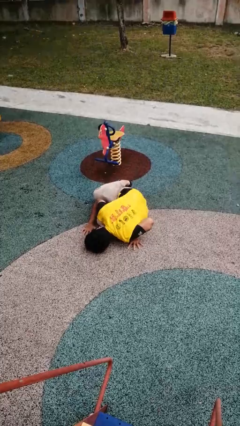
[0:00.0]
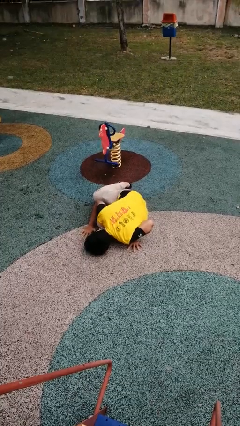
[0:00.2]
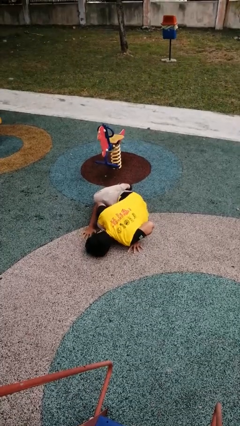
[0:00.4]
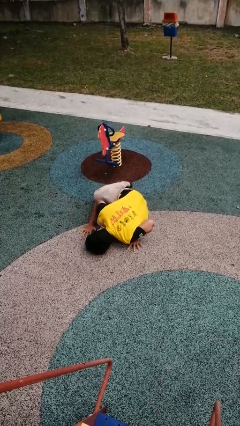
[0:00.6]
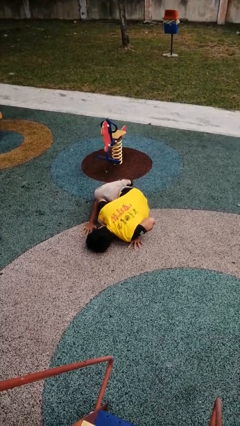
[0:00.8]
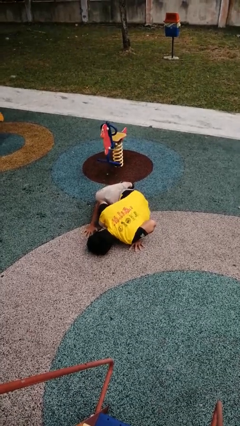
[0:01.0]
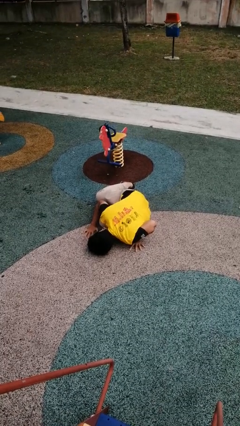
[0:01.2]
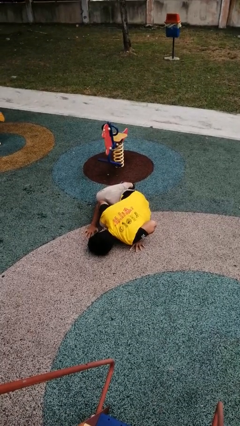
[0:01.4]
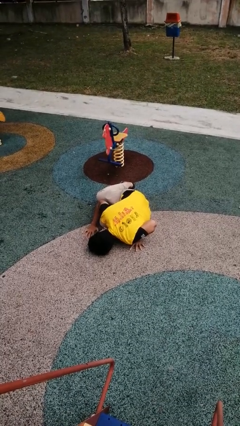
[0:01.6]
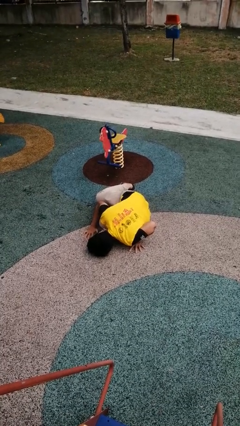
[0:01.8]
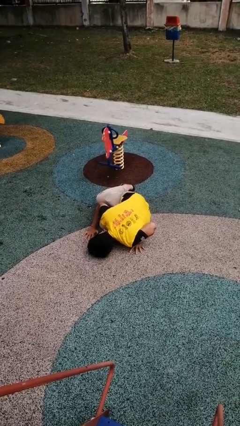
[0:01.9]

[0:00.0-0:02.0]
person lies down on floor

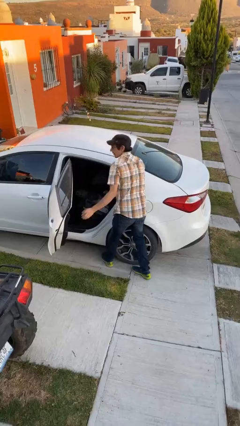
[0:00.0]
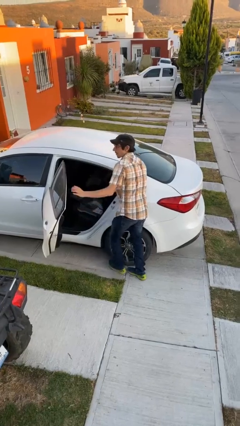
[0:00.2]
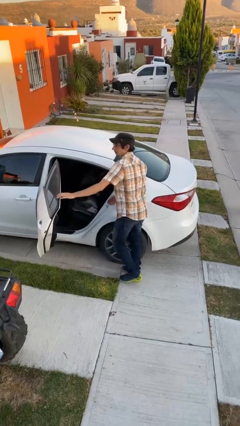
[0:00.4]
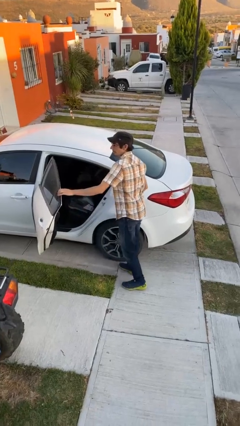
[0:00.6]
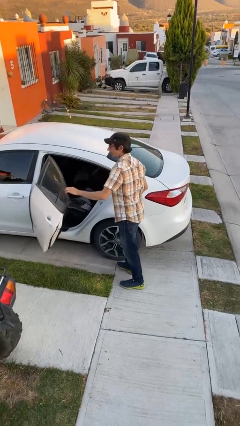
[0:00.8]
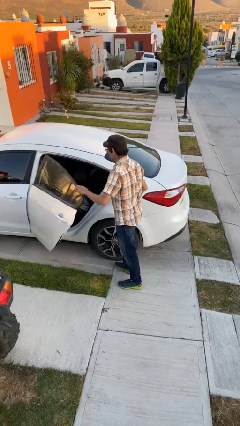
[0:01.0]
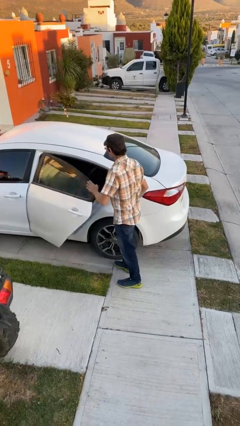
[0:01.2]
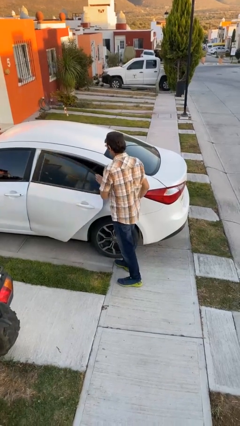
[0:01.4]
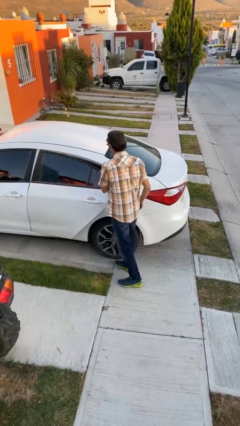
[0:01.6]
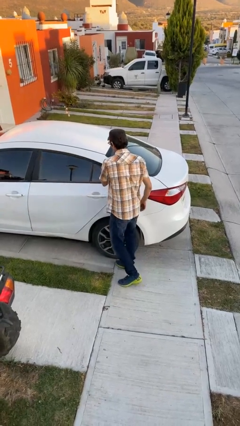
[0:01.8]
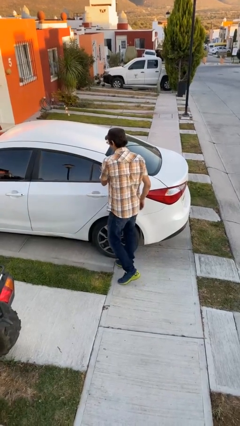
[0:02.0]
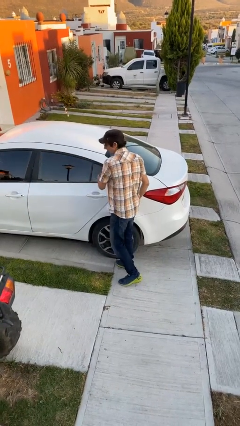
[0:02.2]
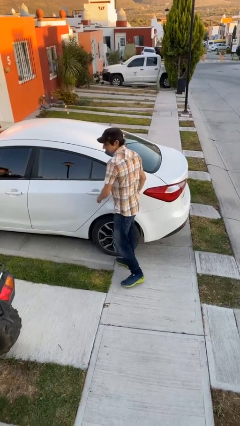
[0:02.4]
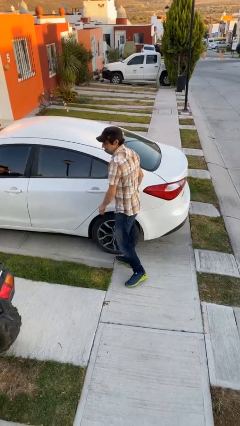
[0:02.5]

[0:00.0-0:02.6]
person closes car door

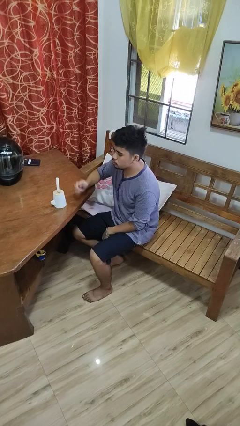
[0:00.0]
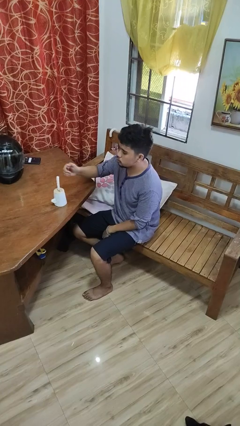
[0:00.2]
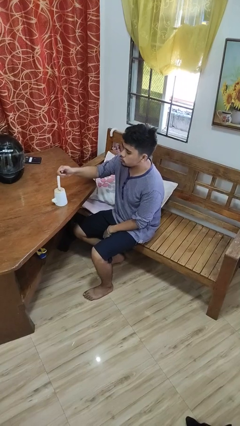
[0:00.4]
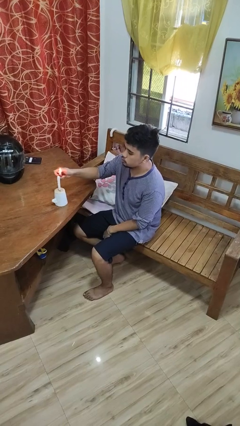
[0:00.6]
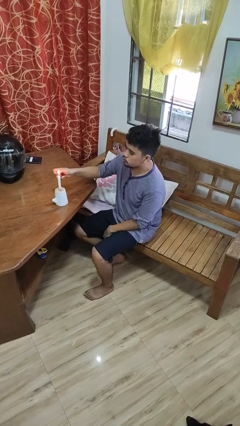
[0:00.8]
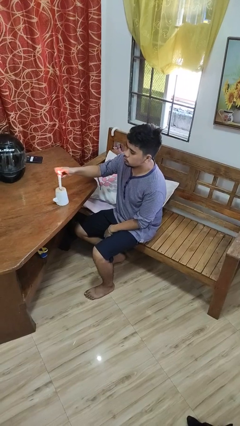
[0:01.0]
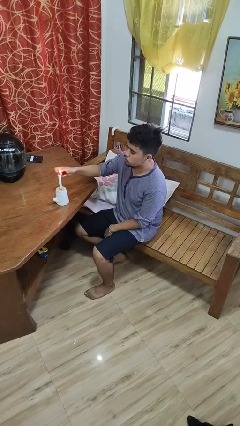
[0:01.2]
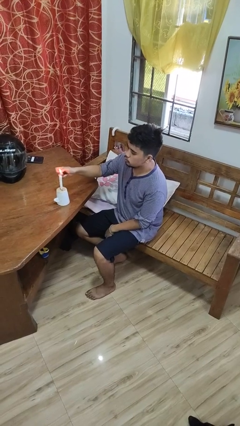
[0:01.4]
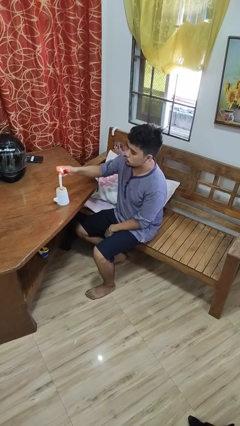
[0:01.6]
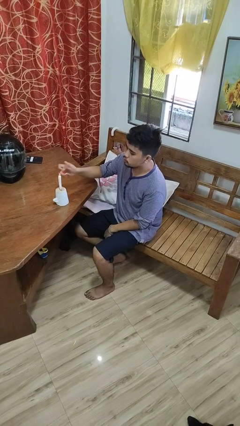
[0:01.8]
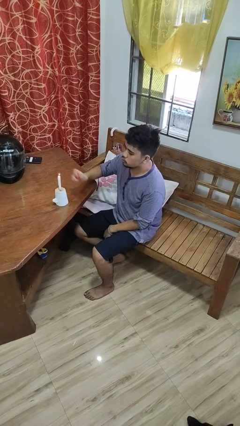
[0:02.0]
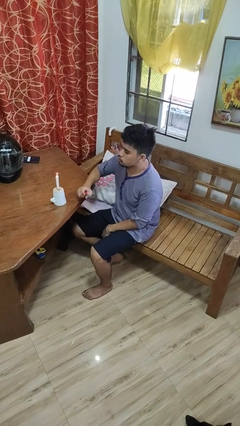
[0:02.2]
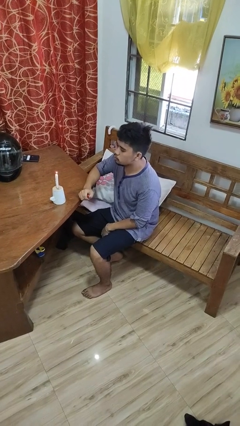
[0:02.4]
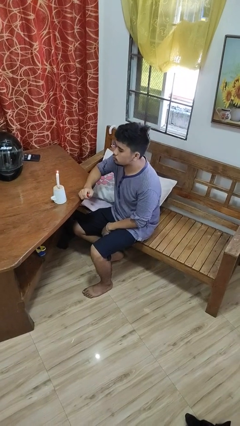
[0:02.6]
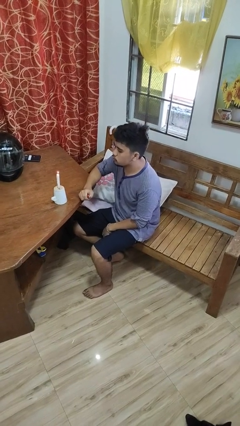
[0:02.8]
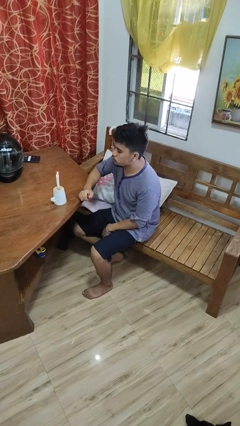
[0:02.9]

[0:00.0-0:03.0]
person lights candle

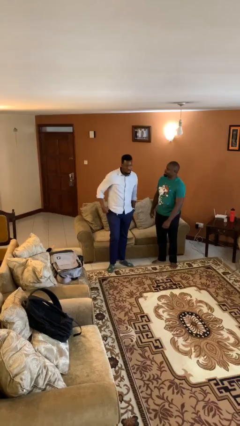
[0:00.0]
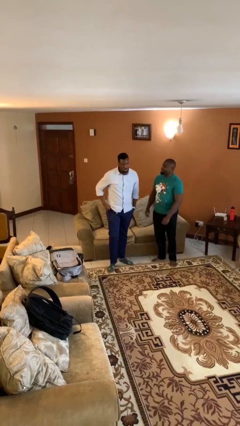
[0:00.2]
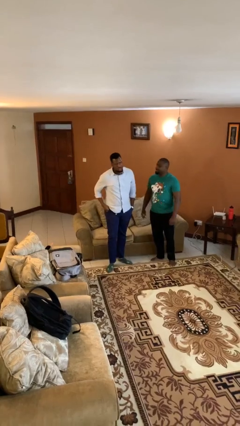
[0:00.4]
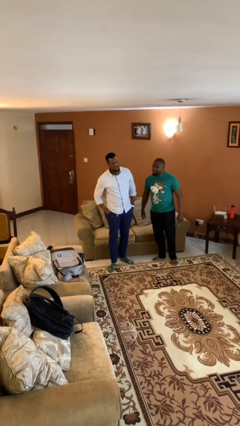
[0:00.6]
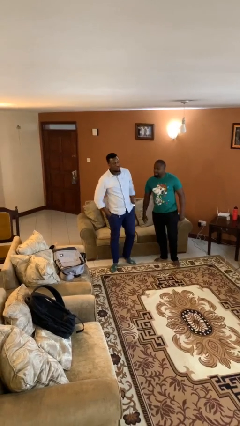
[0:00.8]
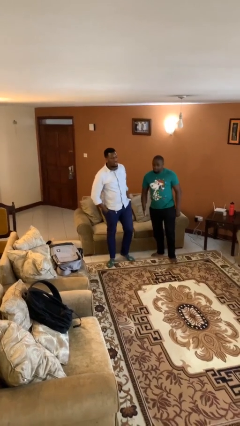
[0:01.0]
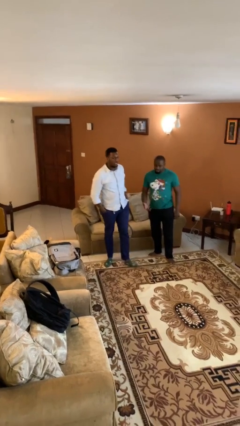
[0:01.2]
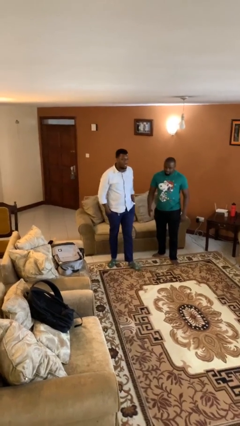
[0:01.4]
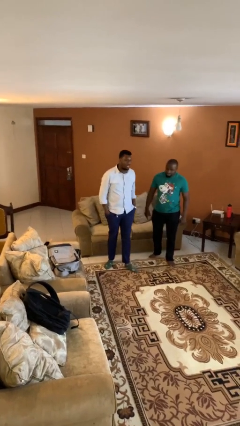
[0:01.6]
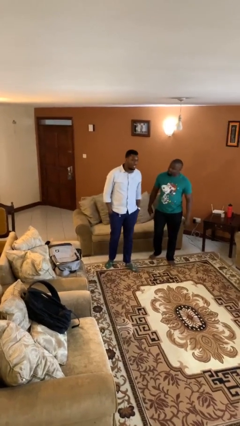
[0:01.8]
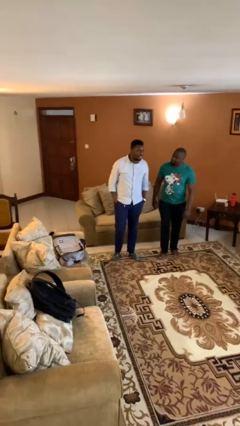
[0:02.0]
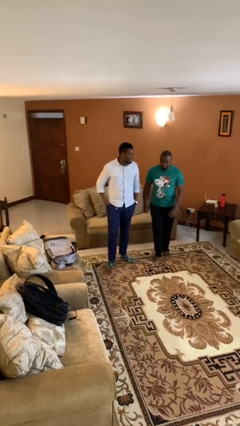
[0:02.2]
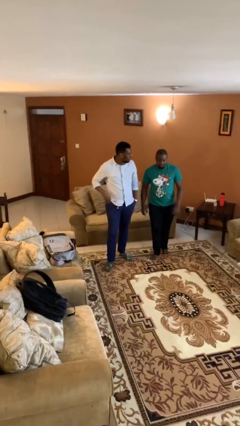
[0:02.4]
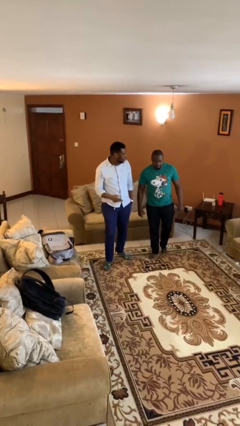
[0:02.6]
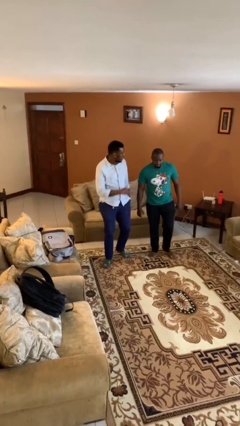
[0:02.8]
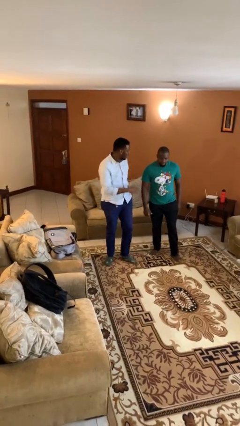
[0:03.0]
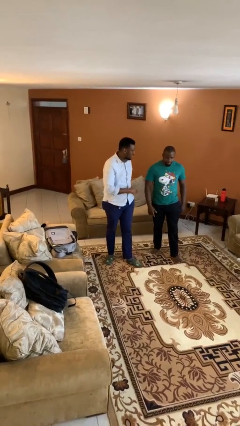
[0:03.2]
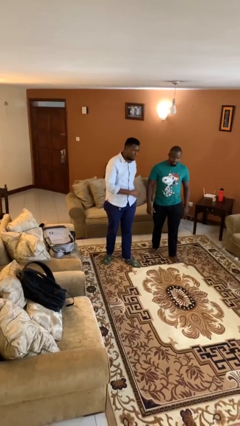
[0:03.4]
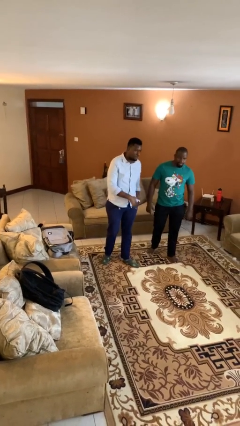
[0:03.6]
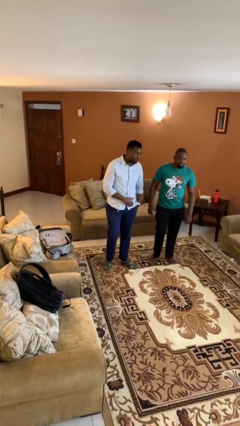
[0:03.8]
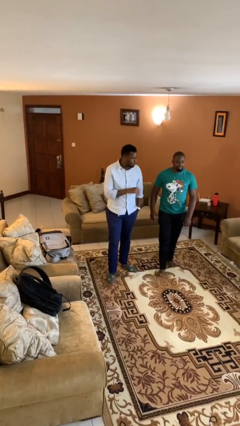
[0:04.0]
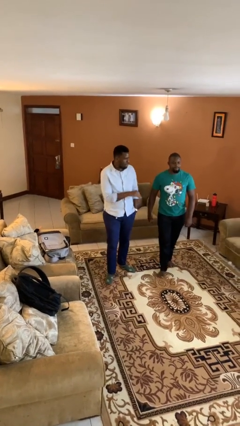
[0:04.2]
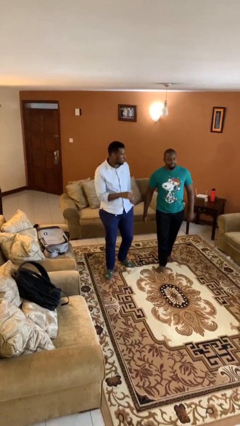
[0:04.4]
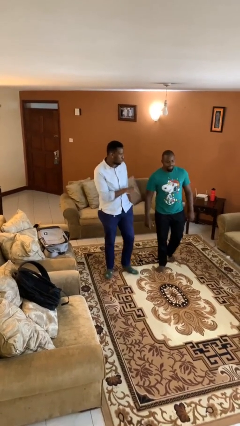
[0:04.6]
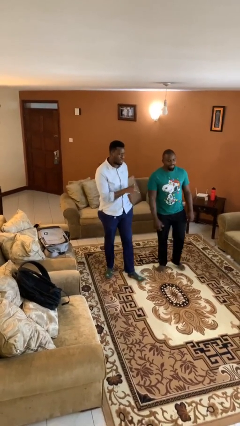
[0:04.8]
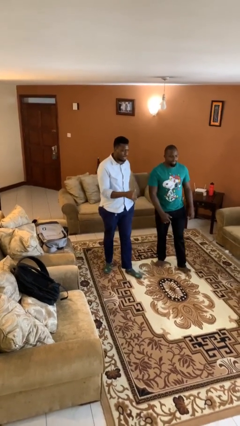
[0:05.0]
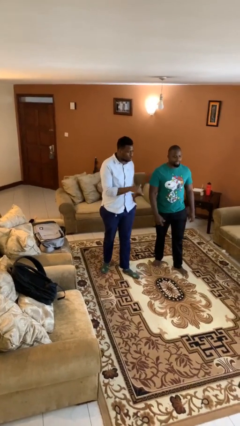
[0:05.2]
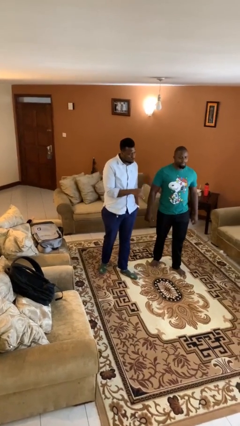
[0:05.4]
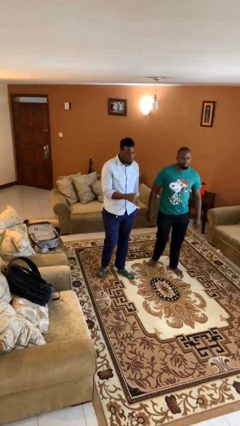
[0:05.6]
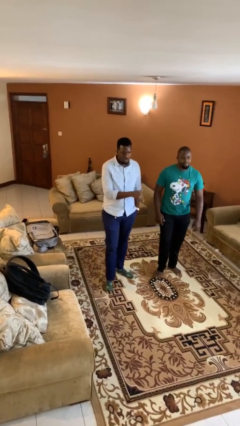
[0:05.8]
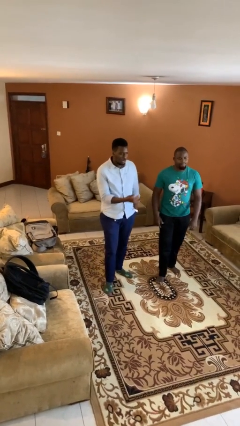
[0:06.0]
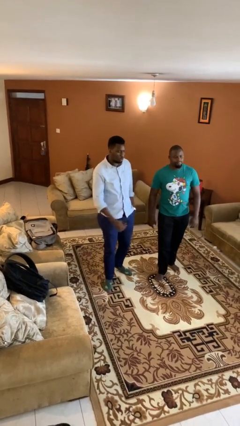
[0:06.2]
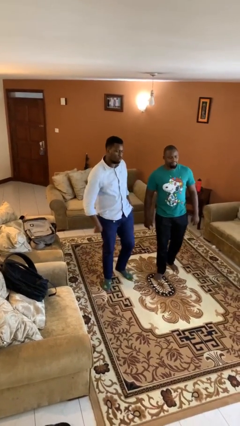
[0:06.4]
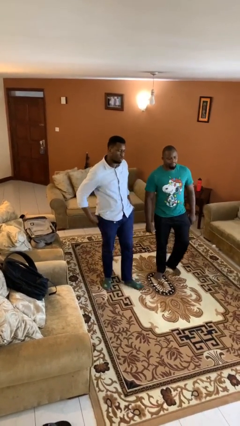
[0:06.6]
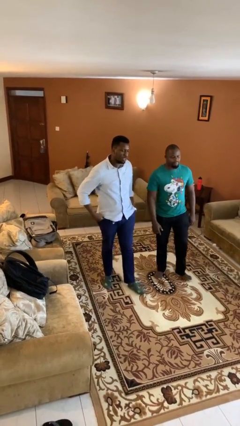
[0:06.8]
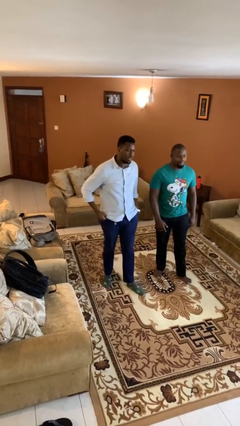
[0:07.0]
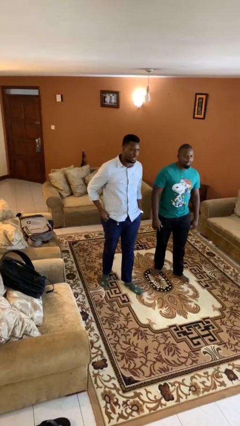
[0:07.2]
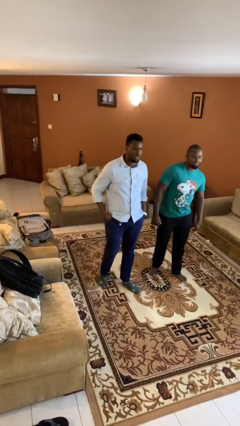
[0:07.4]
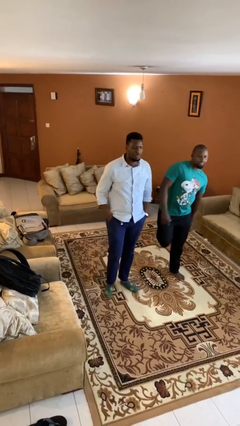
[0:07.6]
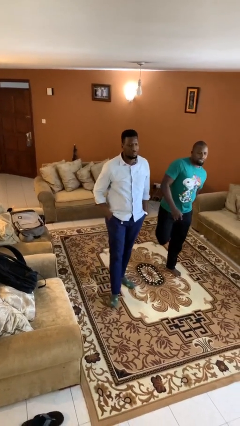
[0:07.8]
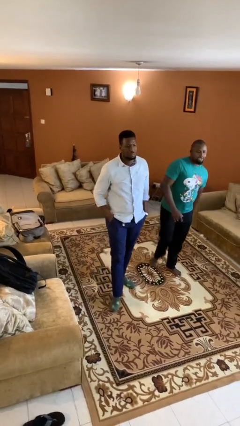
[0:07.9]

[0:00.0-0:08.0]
person talks to person

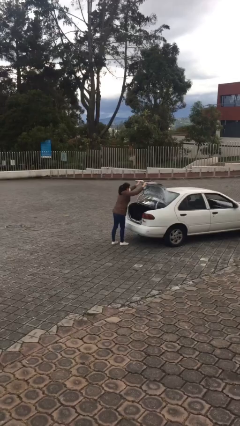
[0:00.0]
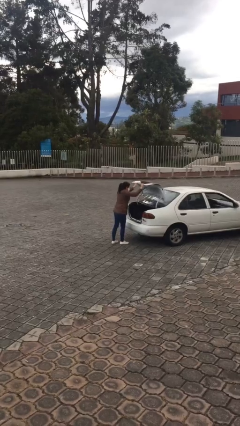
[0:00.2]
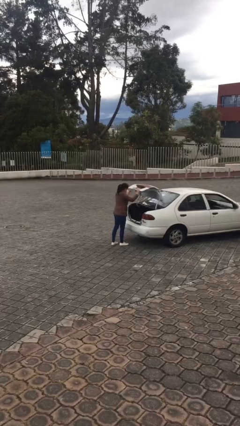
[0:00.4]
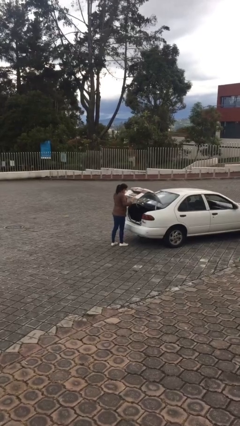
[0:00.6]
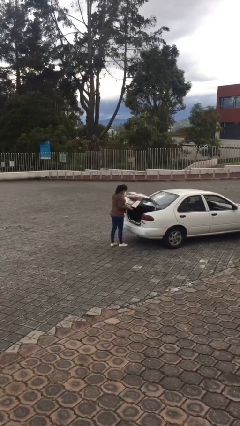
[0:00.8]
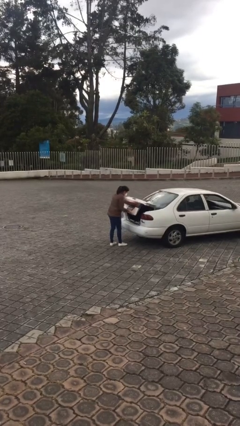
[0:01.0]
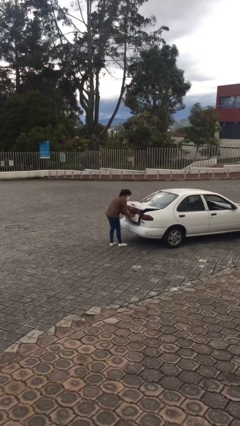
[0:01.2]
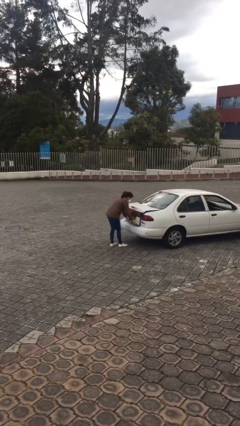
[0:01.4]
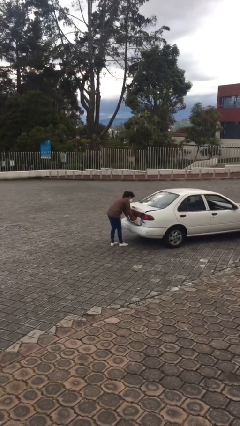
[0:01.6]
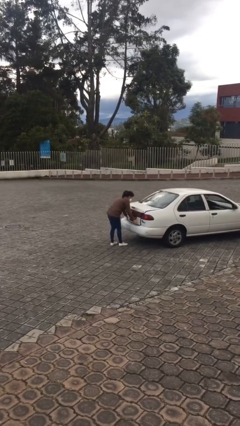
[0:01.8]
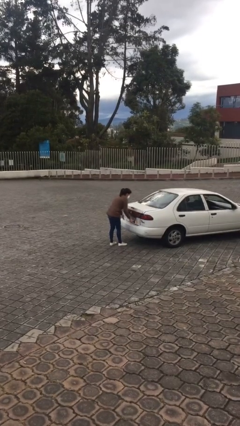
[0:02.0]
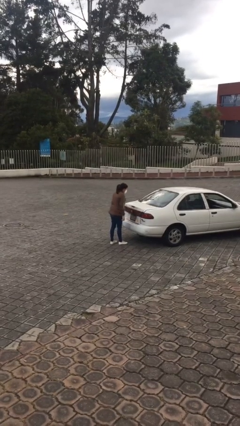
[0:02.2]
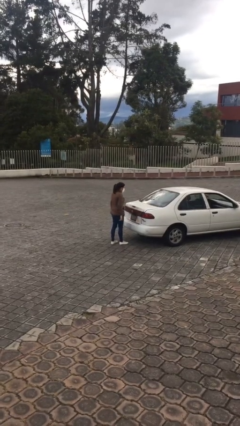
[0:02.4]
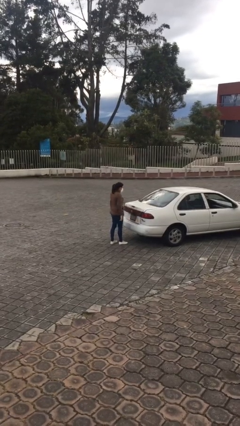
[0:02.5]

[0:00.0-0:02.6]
person closes car trunk
